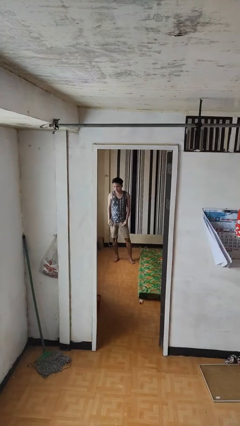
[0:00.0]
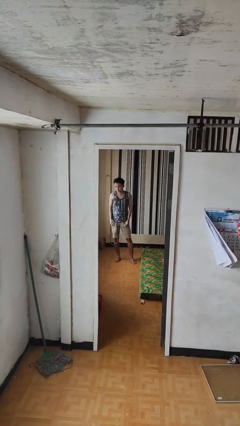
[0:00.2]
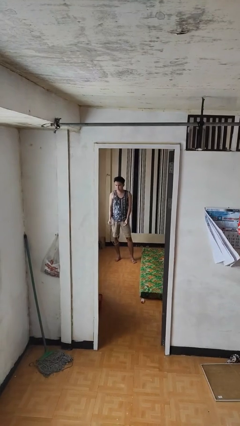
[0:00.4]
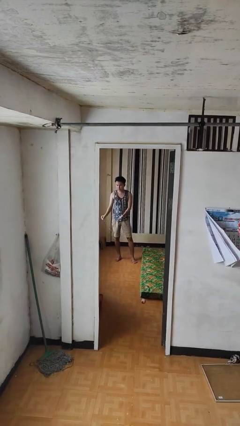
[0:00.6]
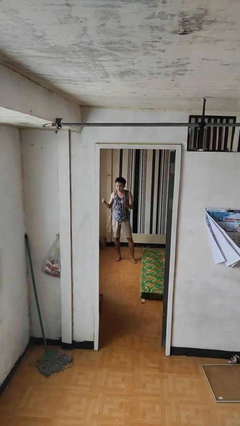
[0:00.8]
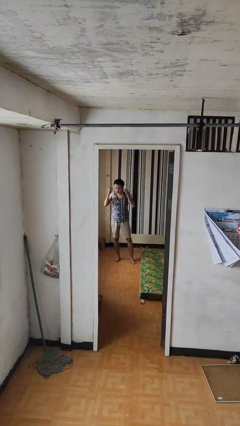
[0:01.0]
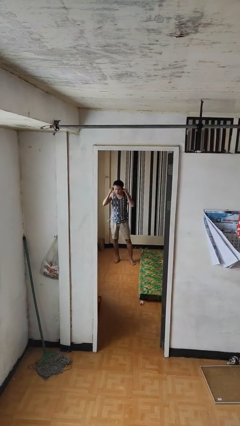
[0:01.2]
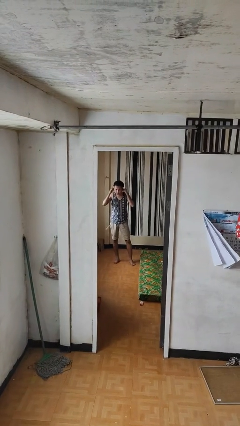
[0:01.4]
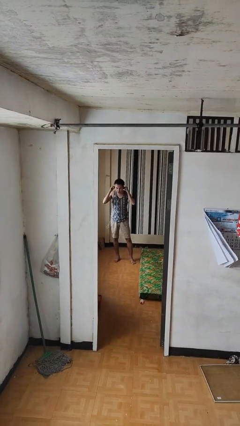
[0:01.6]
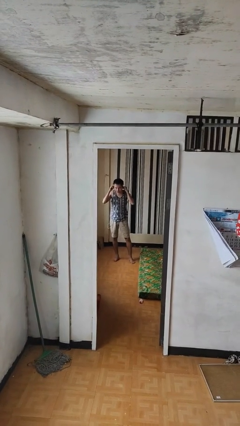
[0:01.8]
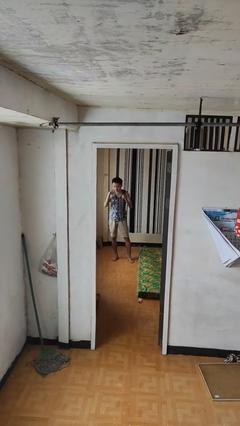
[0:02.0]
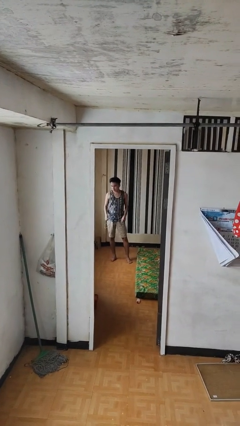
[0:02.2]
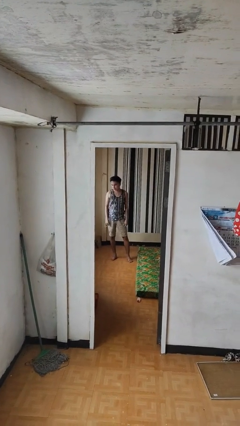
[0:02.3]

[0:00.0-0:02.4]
person puts on headphones

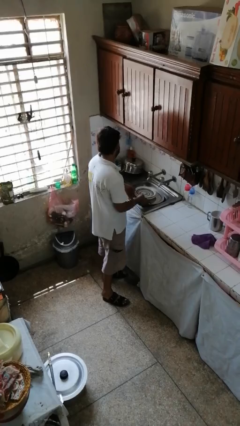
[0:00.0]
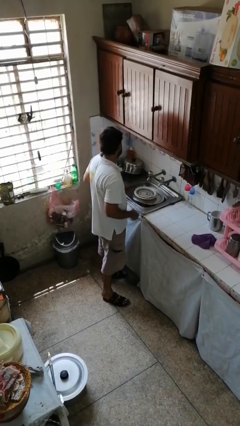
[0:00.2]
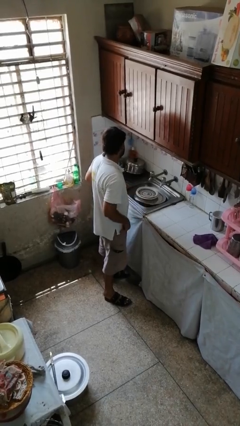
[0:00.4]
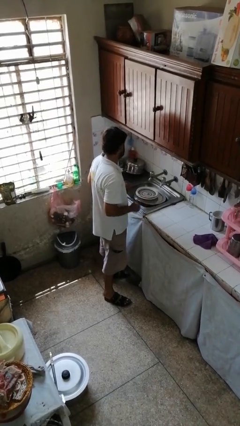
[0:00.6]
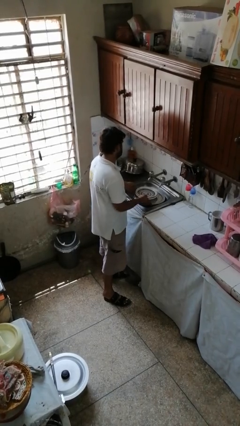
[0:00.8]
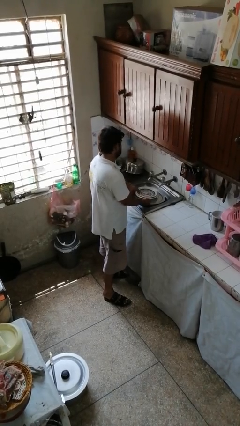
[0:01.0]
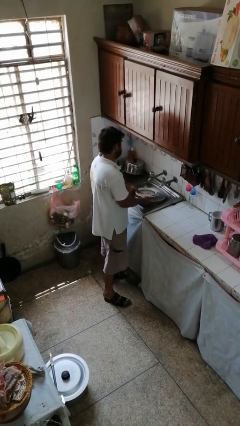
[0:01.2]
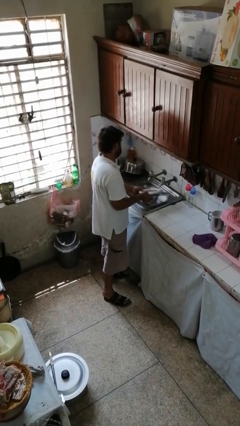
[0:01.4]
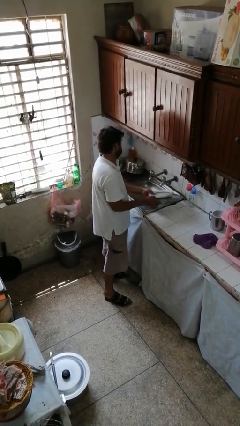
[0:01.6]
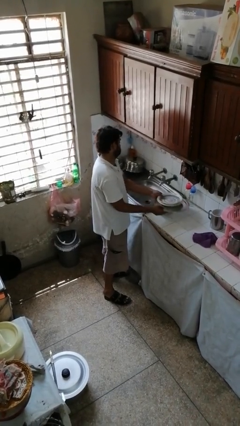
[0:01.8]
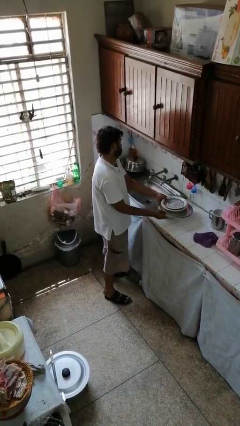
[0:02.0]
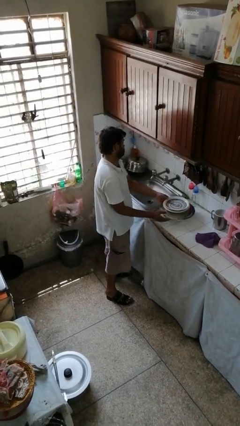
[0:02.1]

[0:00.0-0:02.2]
person unloads dishwasher

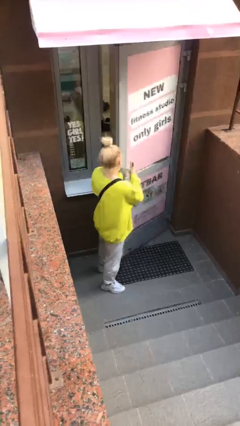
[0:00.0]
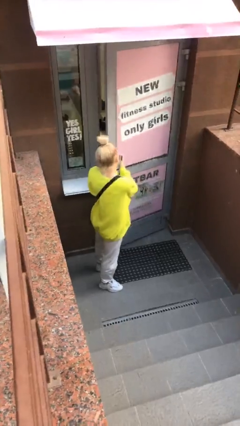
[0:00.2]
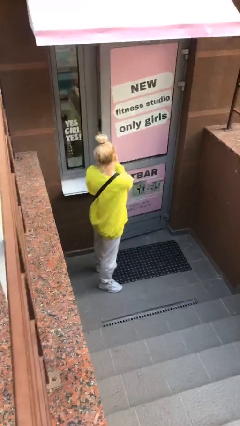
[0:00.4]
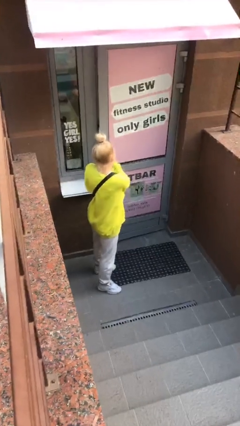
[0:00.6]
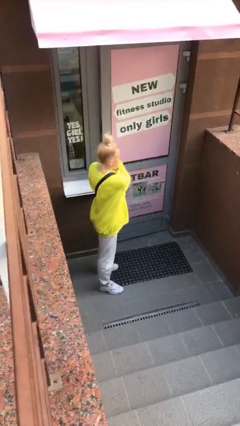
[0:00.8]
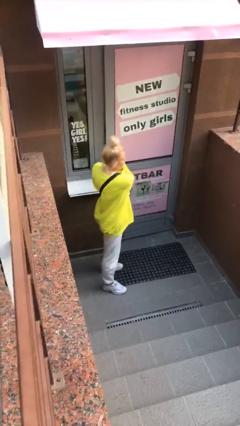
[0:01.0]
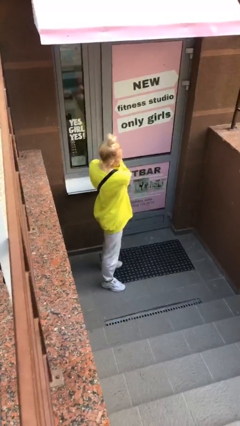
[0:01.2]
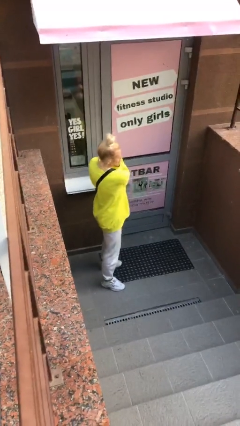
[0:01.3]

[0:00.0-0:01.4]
person closes facility door

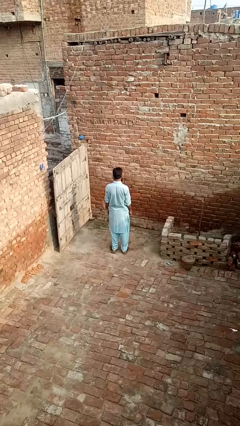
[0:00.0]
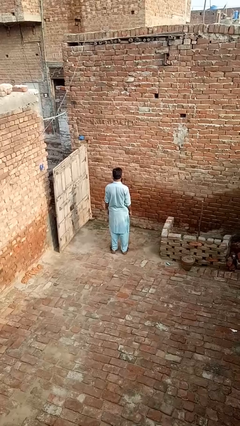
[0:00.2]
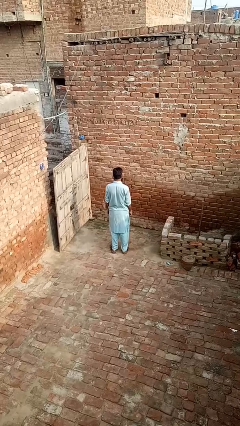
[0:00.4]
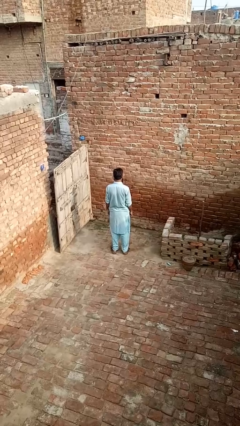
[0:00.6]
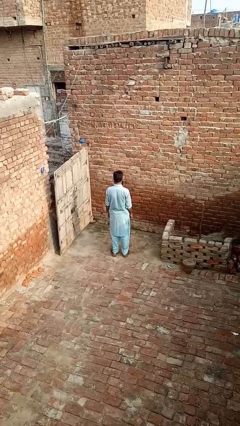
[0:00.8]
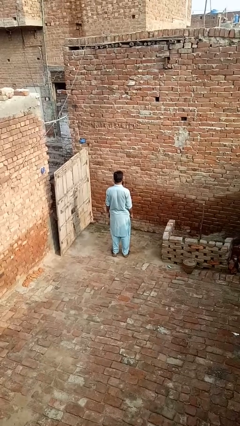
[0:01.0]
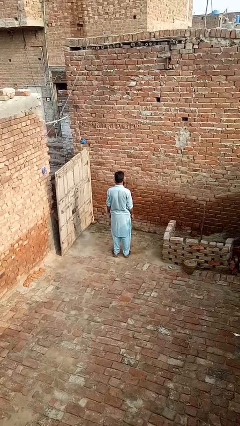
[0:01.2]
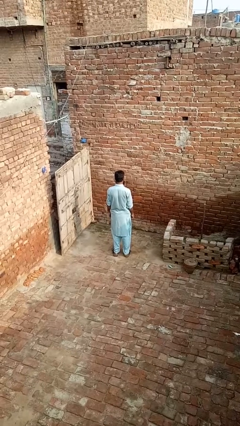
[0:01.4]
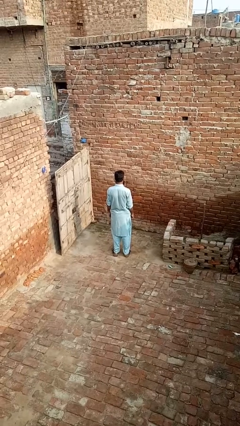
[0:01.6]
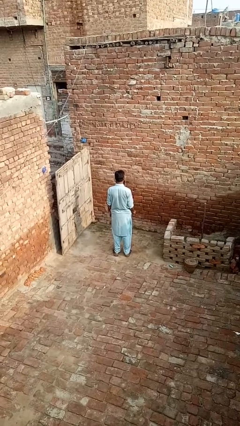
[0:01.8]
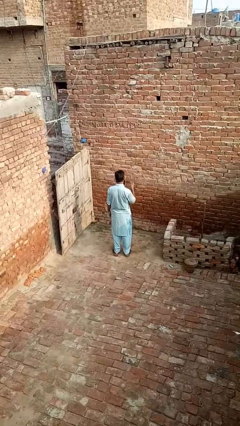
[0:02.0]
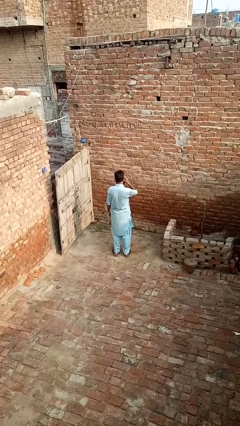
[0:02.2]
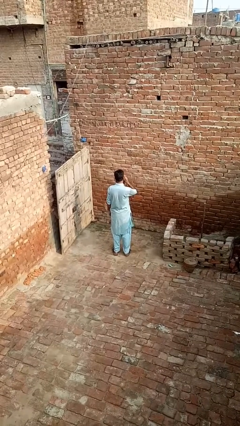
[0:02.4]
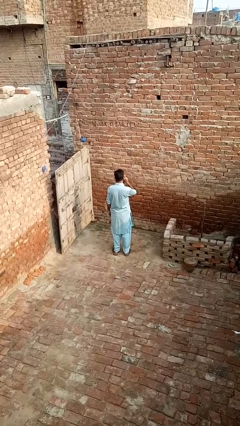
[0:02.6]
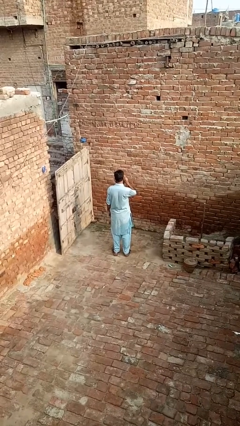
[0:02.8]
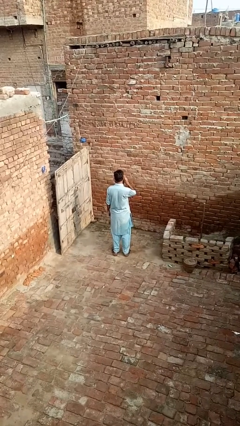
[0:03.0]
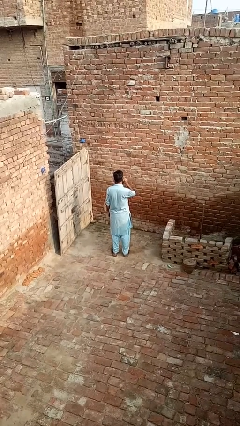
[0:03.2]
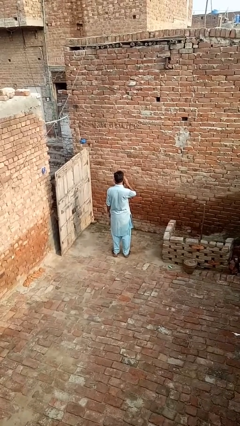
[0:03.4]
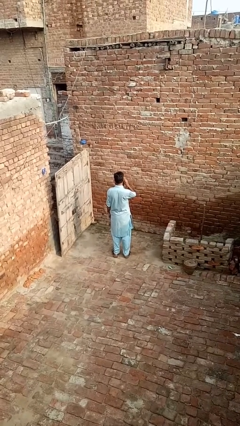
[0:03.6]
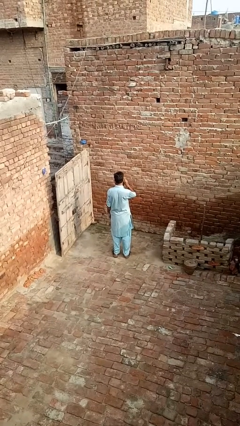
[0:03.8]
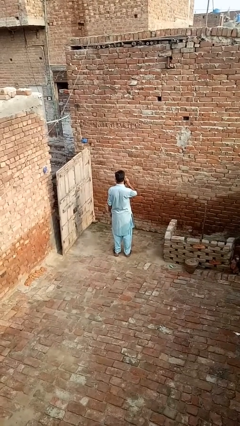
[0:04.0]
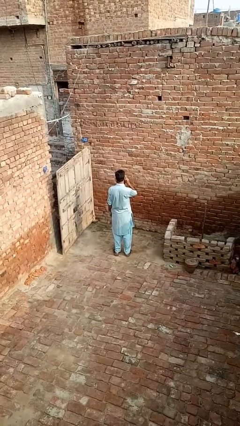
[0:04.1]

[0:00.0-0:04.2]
person touches earlobe

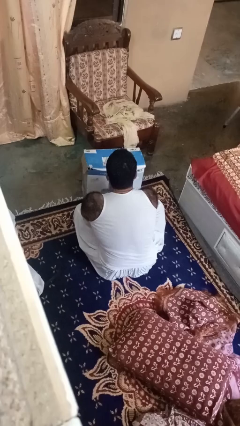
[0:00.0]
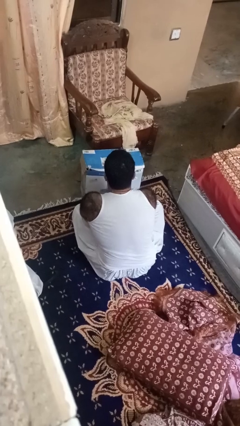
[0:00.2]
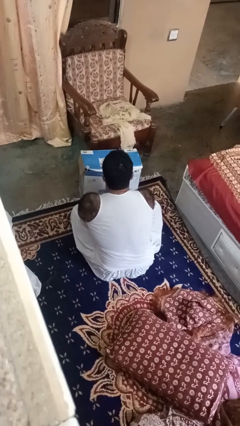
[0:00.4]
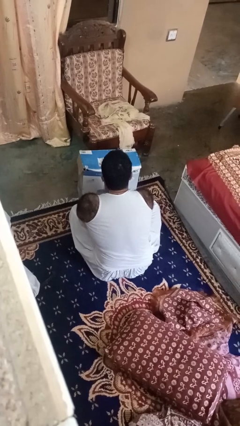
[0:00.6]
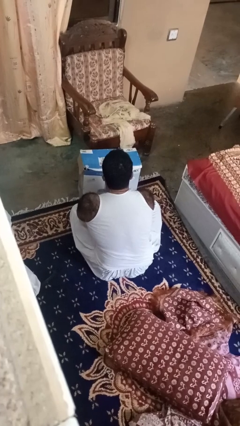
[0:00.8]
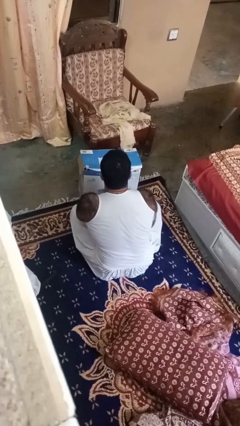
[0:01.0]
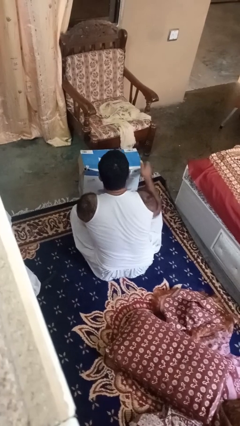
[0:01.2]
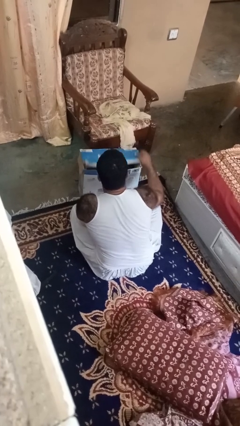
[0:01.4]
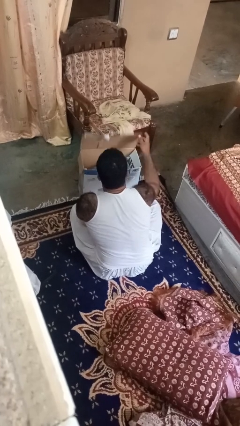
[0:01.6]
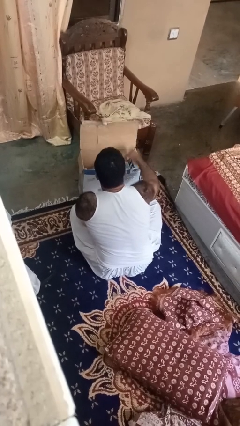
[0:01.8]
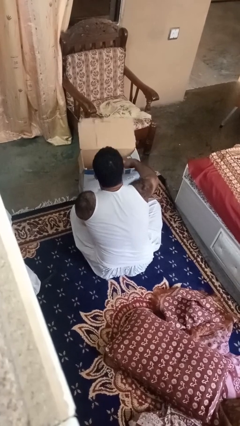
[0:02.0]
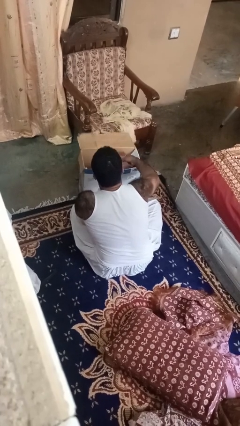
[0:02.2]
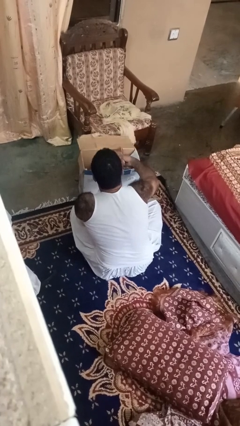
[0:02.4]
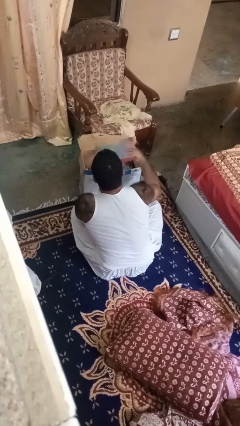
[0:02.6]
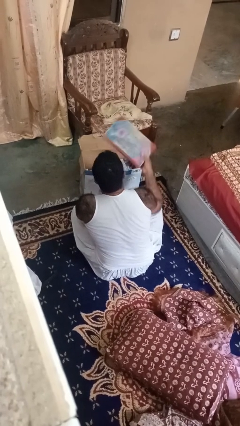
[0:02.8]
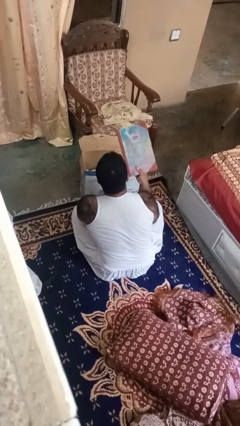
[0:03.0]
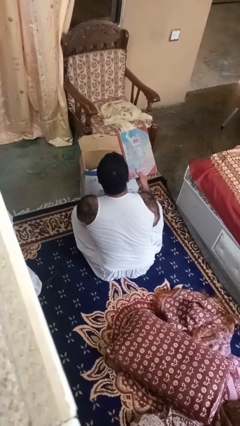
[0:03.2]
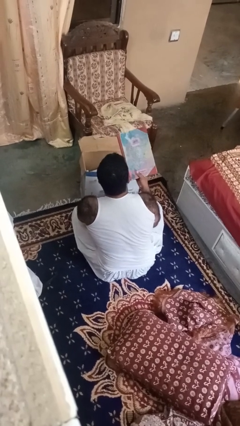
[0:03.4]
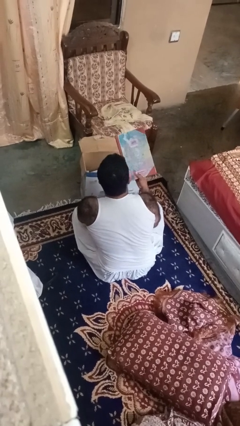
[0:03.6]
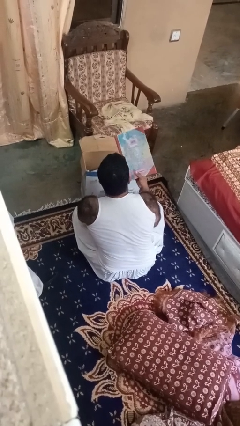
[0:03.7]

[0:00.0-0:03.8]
person takes object from box

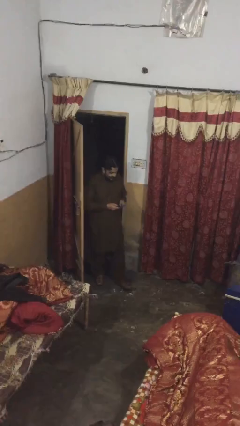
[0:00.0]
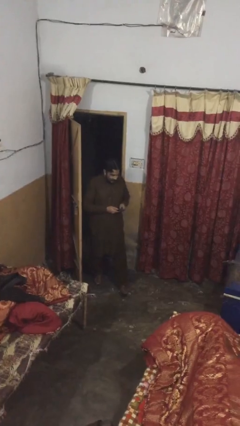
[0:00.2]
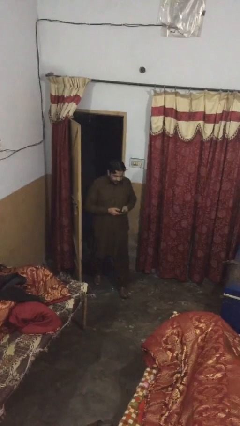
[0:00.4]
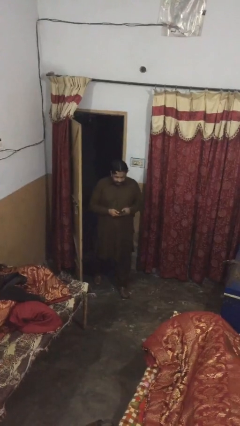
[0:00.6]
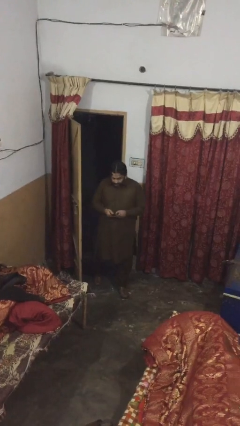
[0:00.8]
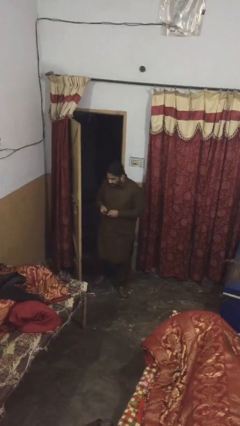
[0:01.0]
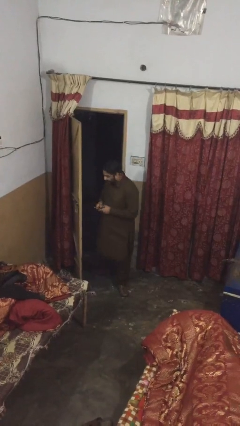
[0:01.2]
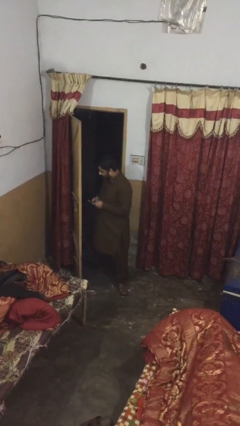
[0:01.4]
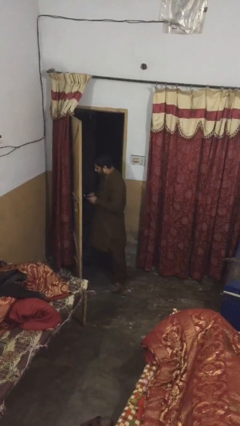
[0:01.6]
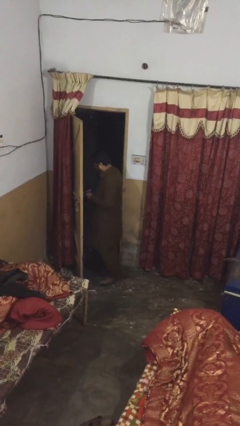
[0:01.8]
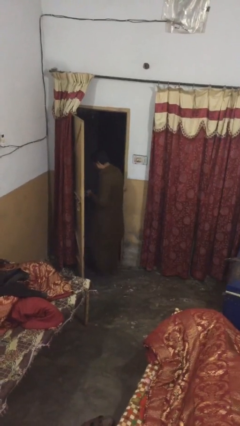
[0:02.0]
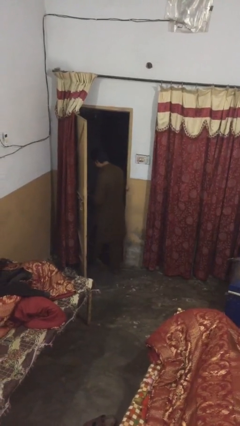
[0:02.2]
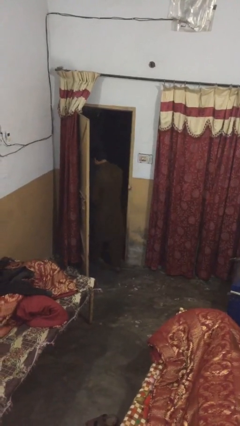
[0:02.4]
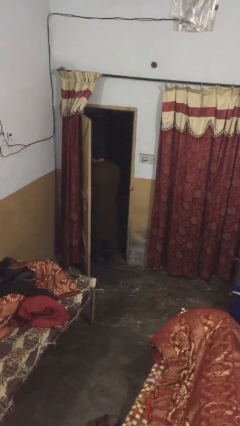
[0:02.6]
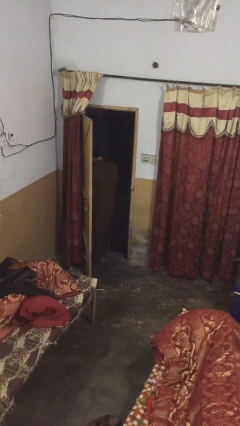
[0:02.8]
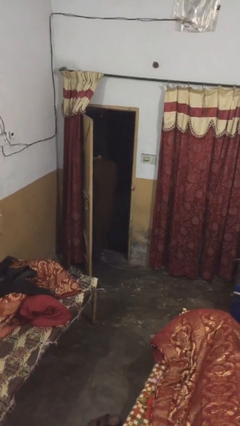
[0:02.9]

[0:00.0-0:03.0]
person exits scene through structure
